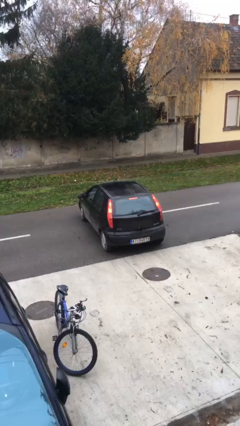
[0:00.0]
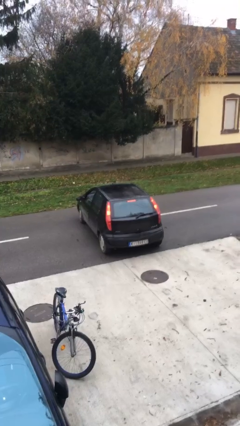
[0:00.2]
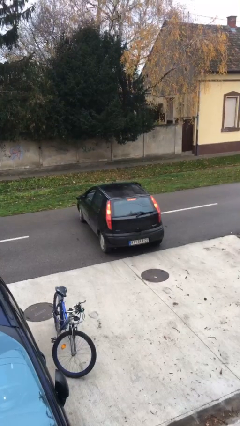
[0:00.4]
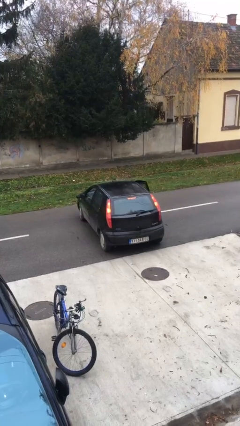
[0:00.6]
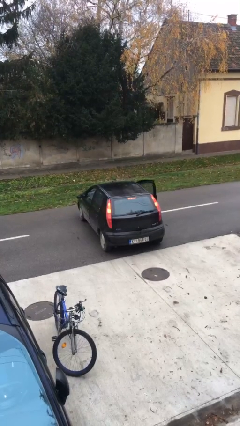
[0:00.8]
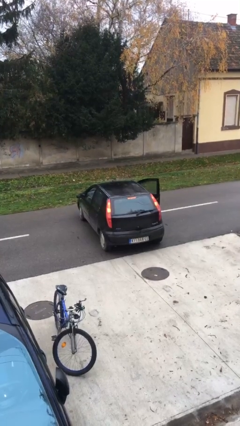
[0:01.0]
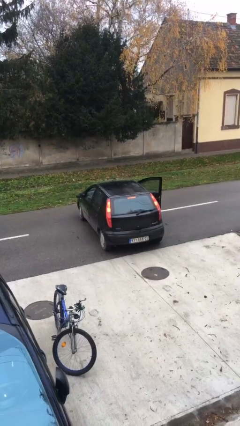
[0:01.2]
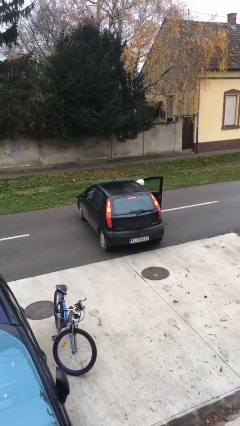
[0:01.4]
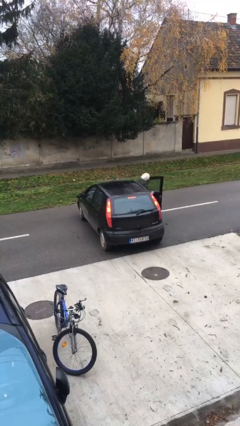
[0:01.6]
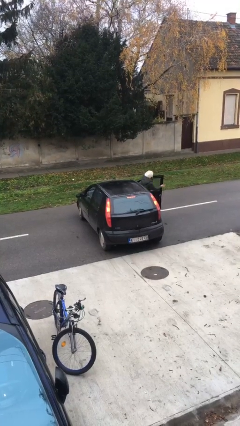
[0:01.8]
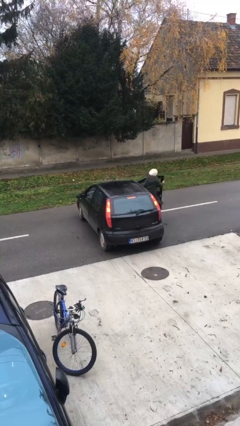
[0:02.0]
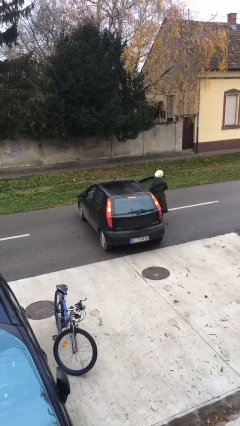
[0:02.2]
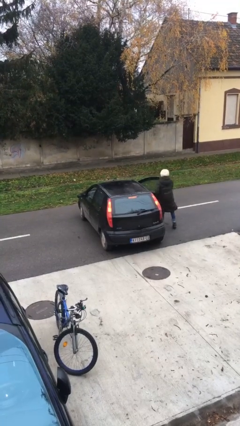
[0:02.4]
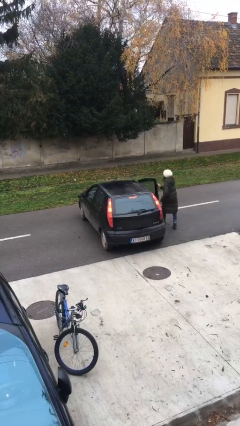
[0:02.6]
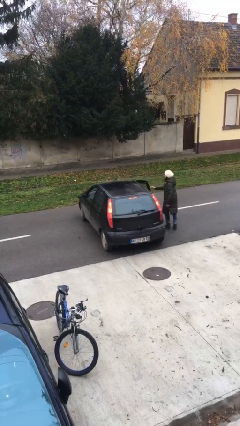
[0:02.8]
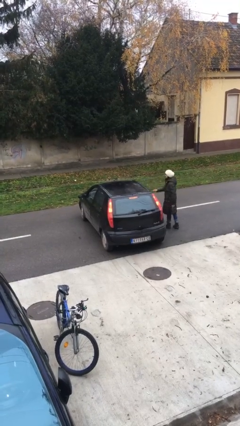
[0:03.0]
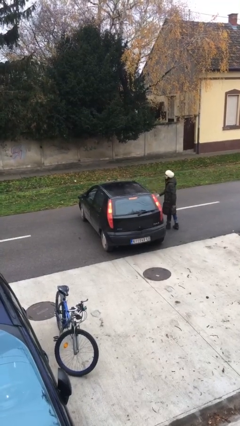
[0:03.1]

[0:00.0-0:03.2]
car drops off person

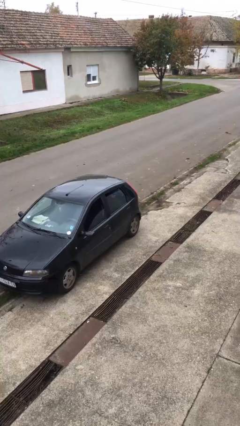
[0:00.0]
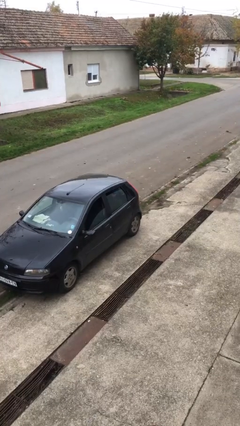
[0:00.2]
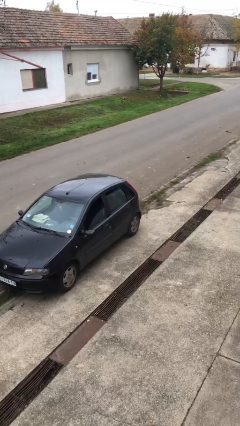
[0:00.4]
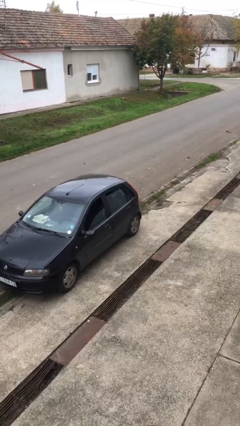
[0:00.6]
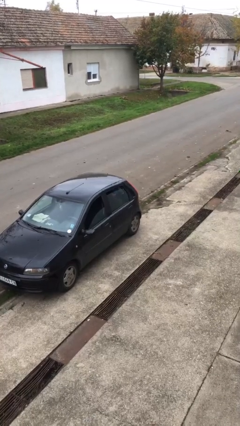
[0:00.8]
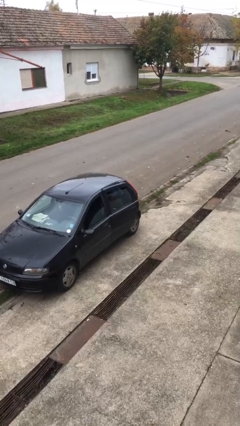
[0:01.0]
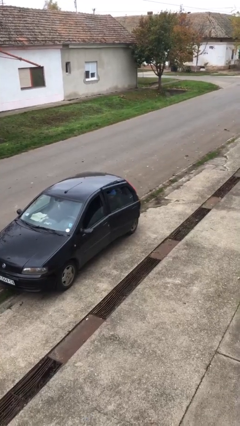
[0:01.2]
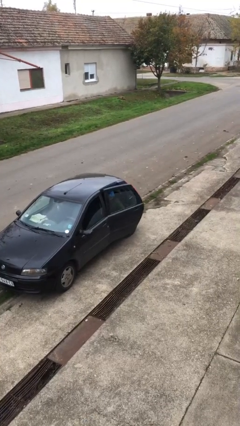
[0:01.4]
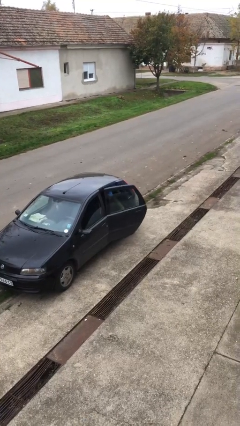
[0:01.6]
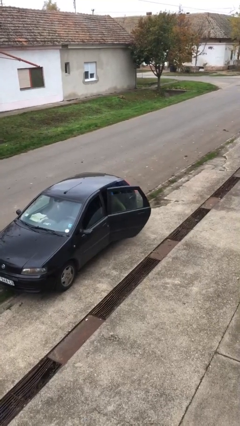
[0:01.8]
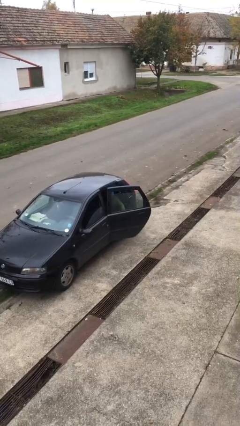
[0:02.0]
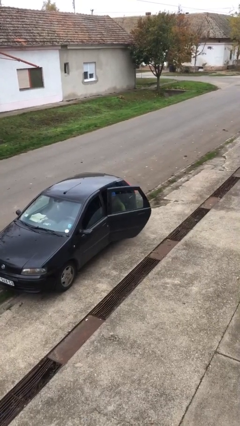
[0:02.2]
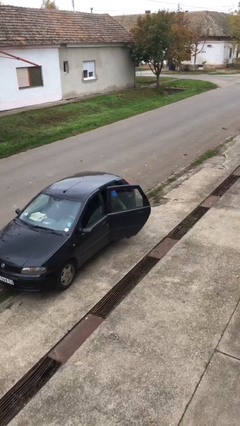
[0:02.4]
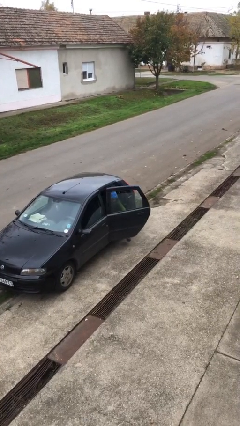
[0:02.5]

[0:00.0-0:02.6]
person opens car door

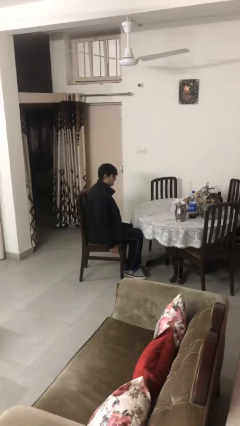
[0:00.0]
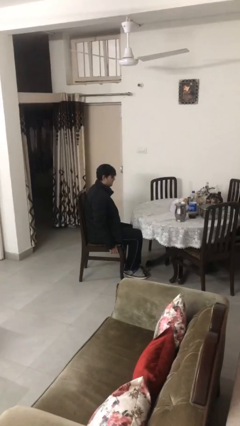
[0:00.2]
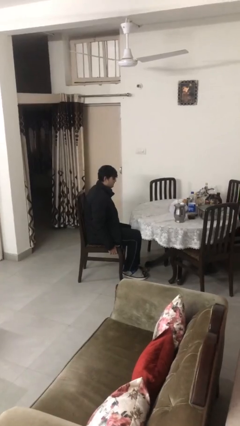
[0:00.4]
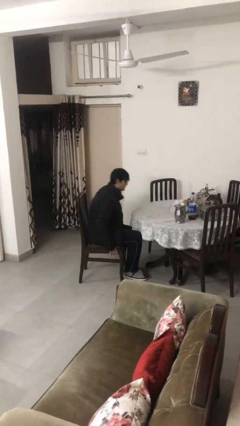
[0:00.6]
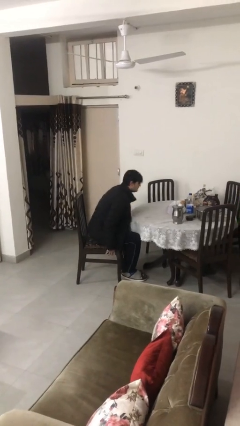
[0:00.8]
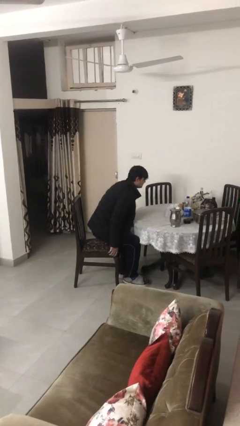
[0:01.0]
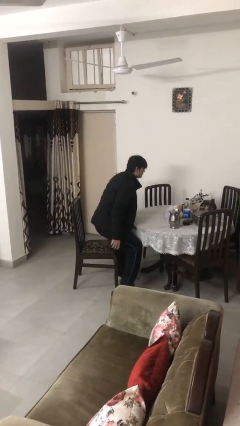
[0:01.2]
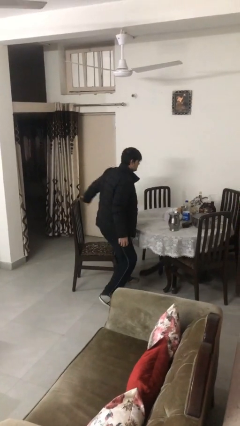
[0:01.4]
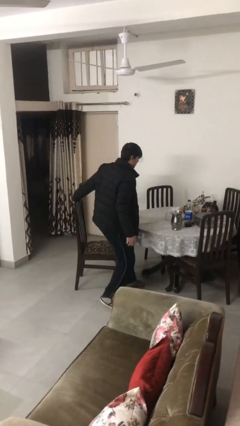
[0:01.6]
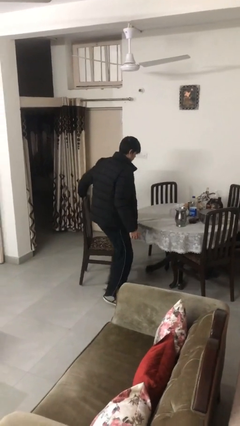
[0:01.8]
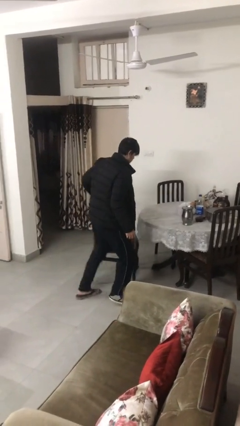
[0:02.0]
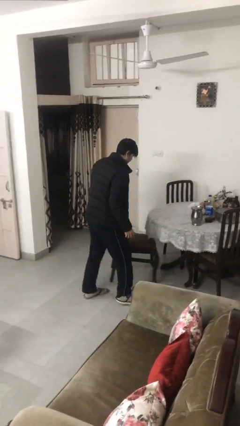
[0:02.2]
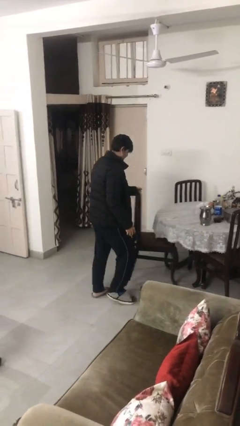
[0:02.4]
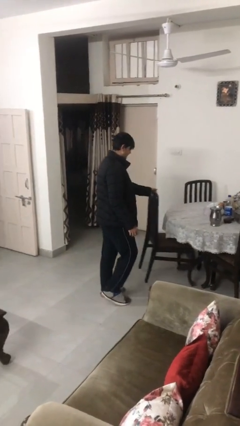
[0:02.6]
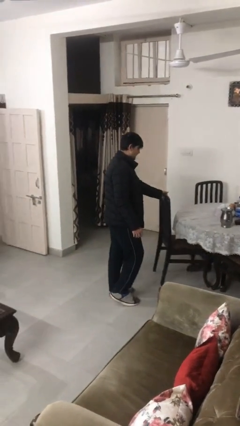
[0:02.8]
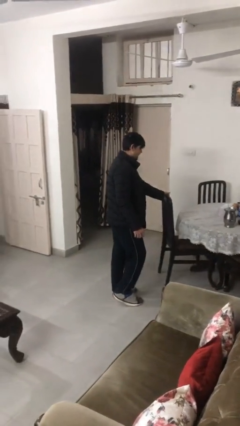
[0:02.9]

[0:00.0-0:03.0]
person stands up

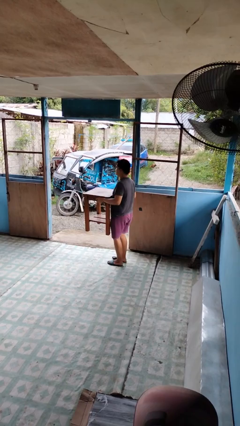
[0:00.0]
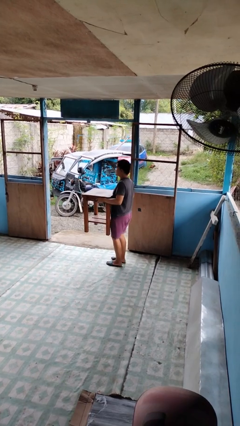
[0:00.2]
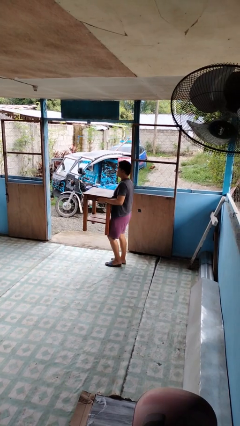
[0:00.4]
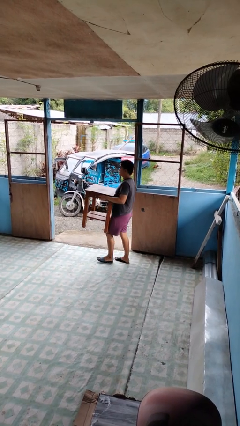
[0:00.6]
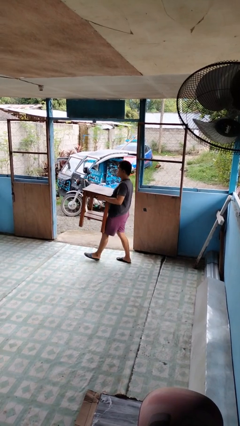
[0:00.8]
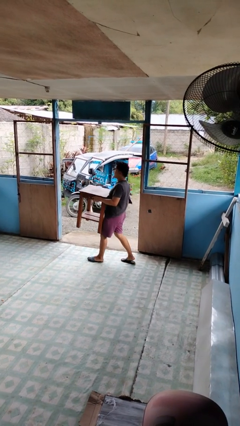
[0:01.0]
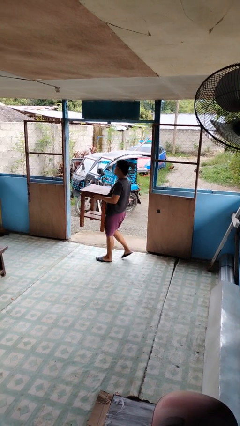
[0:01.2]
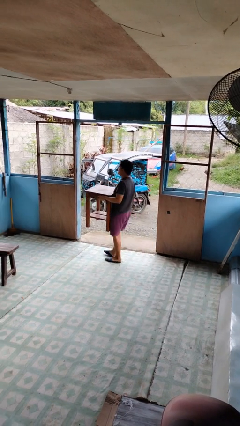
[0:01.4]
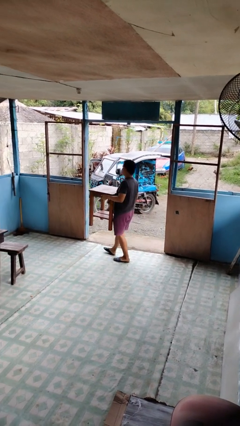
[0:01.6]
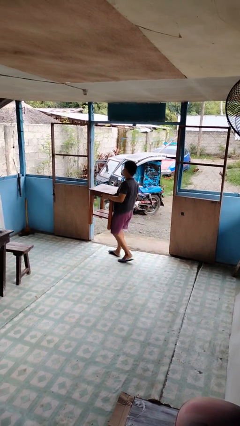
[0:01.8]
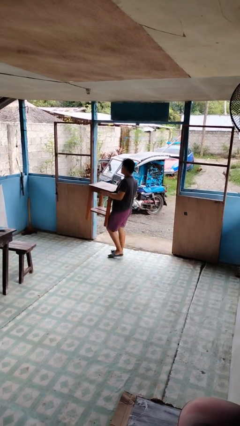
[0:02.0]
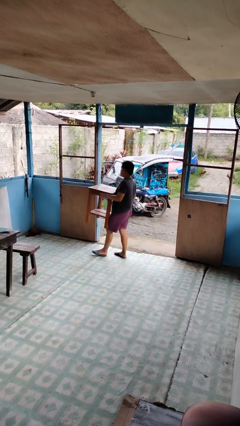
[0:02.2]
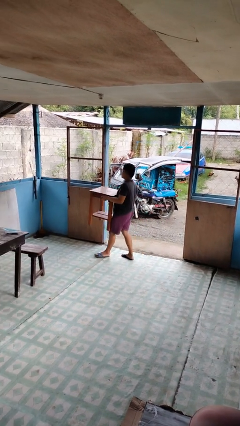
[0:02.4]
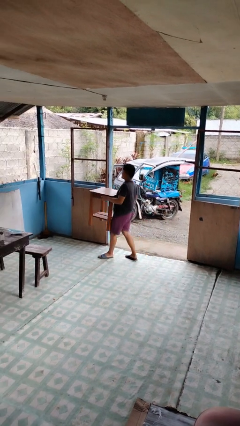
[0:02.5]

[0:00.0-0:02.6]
person carries furniture

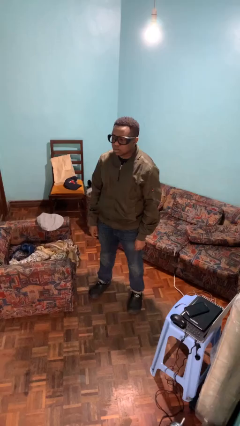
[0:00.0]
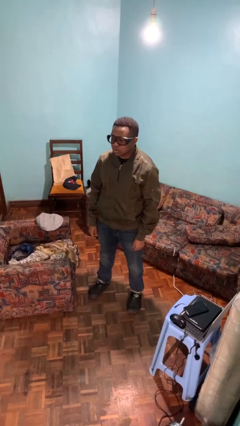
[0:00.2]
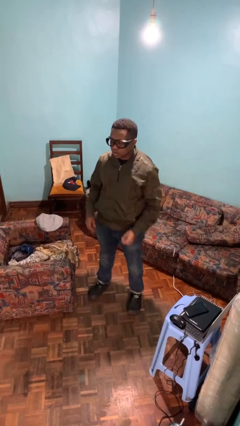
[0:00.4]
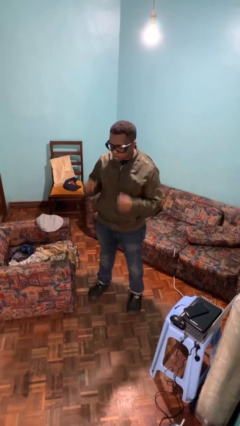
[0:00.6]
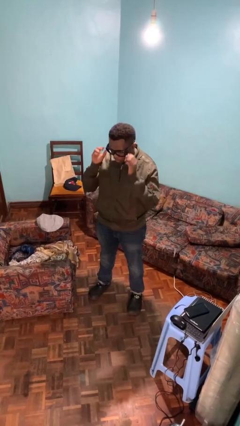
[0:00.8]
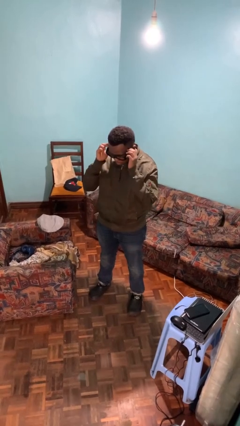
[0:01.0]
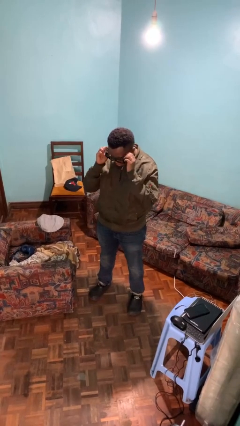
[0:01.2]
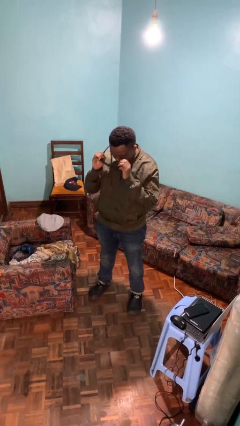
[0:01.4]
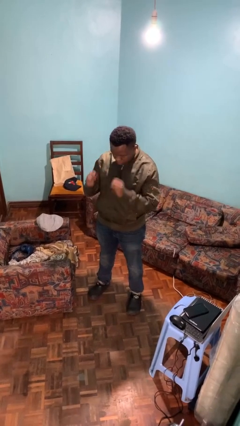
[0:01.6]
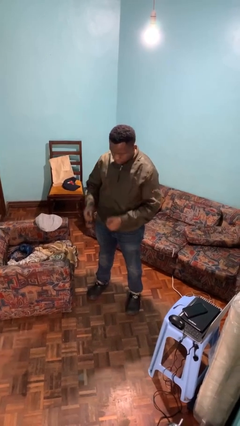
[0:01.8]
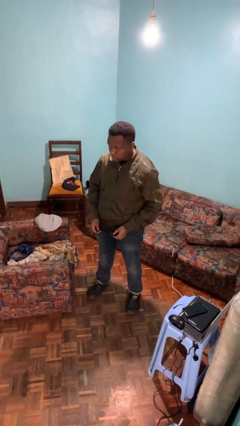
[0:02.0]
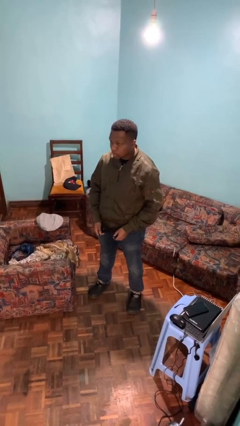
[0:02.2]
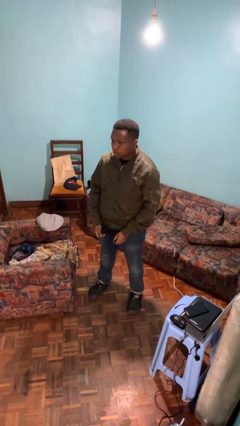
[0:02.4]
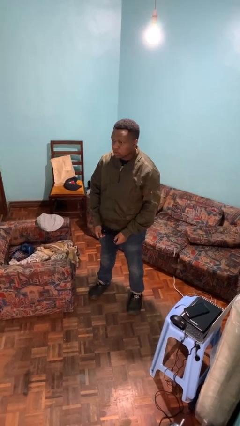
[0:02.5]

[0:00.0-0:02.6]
person takes off glasses

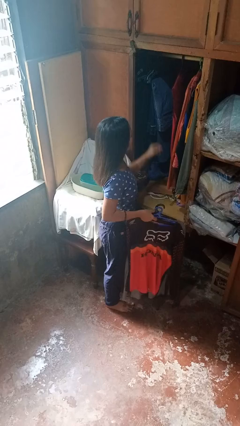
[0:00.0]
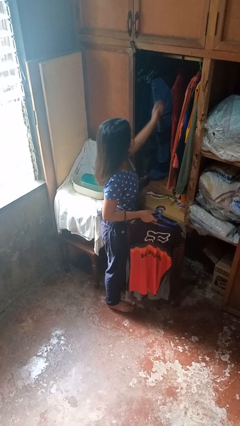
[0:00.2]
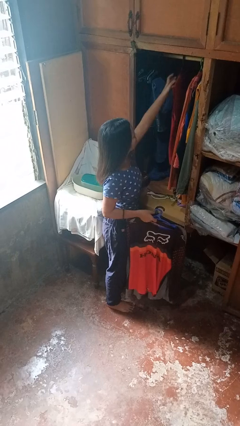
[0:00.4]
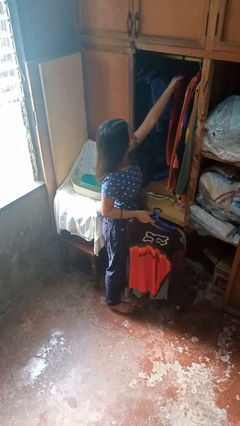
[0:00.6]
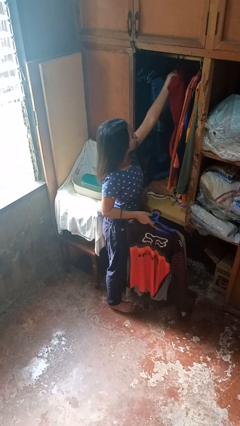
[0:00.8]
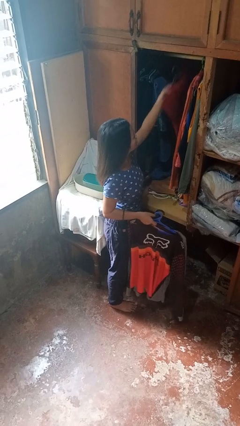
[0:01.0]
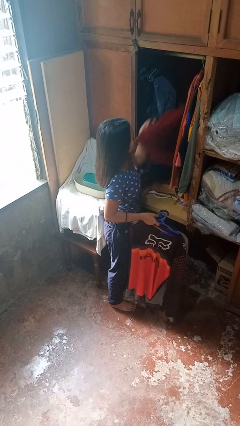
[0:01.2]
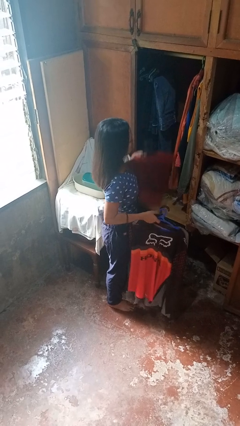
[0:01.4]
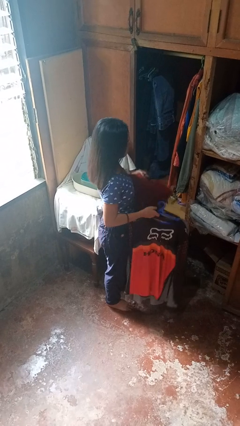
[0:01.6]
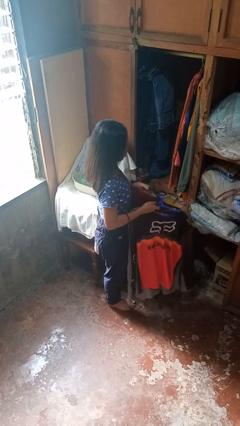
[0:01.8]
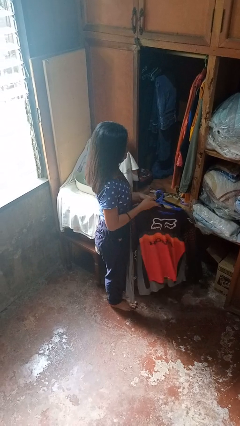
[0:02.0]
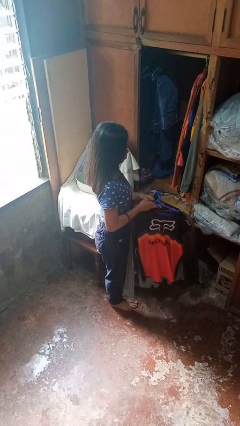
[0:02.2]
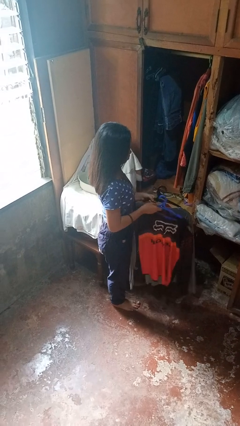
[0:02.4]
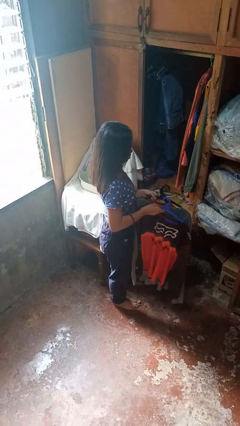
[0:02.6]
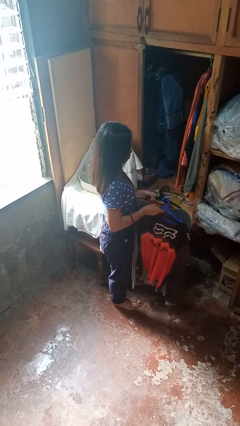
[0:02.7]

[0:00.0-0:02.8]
person takes clothes from closet

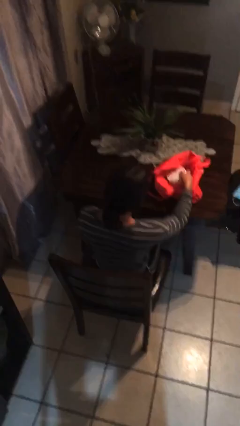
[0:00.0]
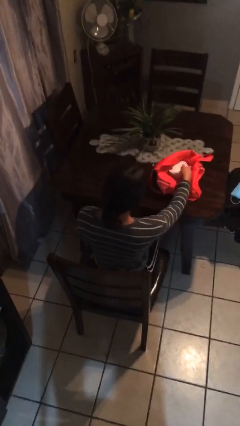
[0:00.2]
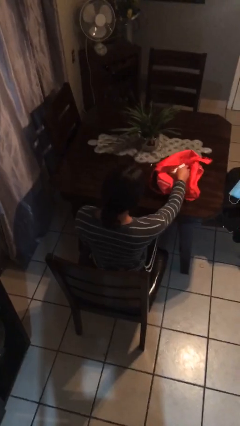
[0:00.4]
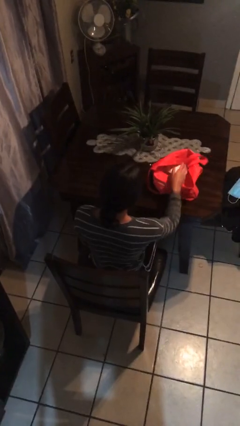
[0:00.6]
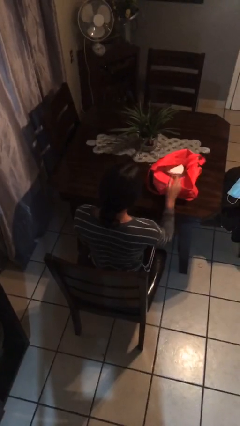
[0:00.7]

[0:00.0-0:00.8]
person puts object into bag
